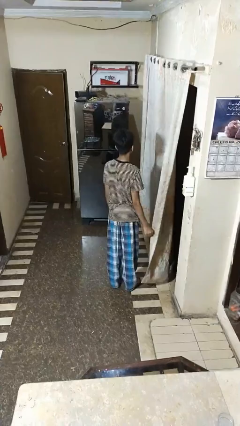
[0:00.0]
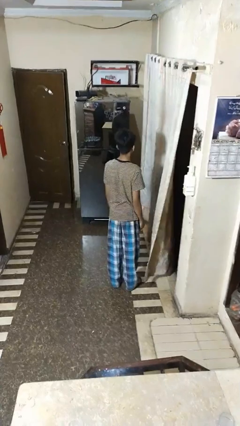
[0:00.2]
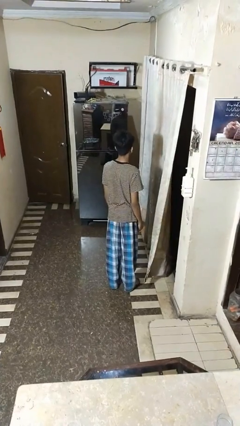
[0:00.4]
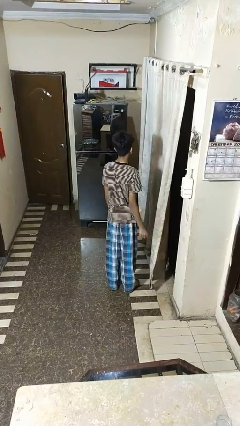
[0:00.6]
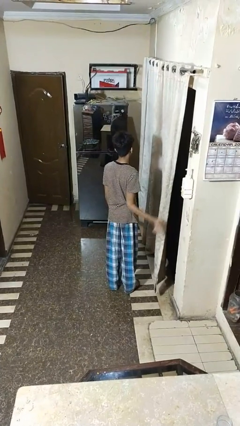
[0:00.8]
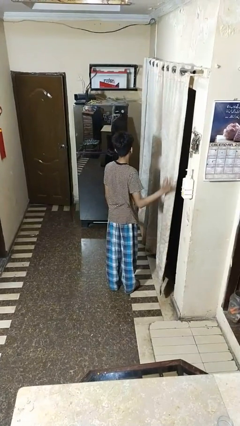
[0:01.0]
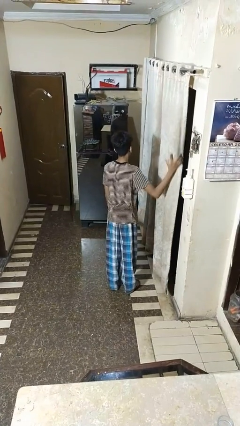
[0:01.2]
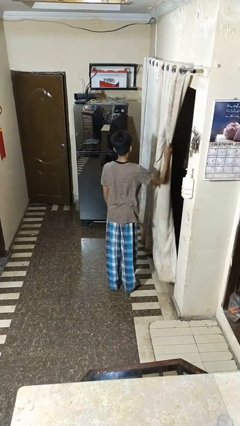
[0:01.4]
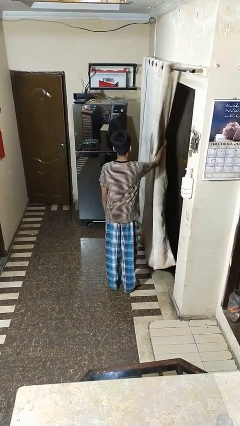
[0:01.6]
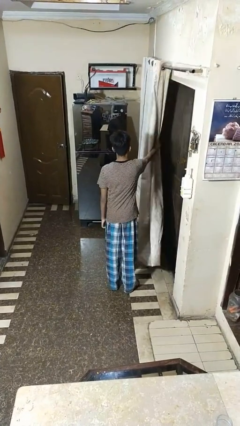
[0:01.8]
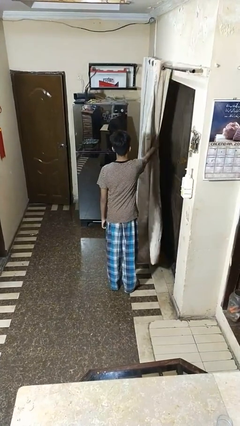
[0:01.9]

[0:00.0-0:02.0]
person opens curtains

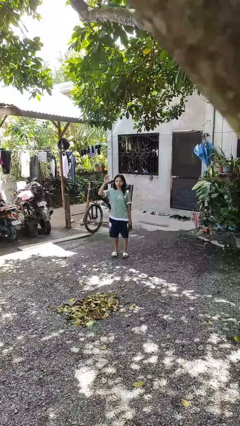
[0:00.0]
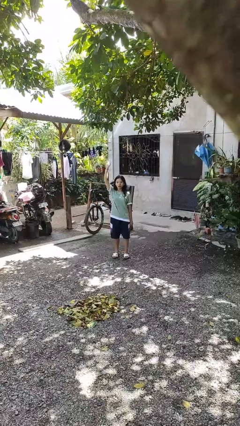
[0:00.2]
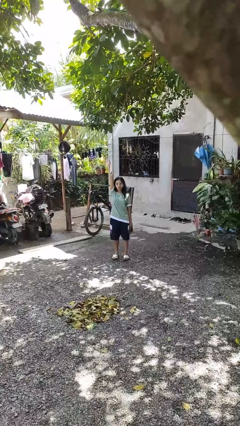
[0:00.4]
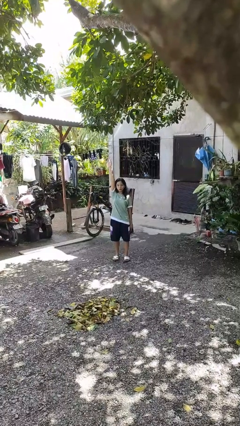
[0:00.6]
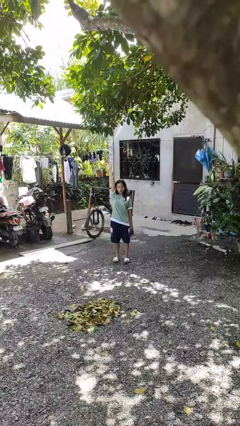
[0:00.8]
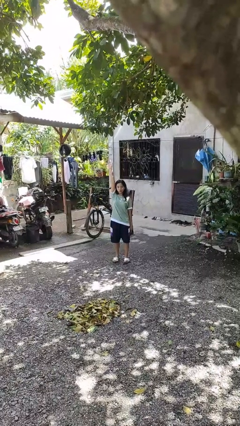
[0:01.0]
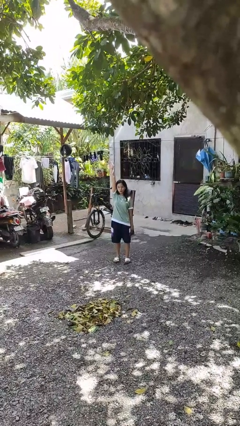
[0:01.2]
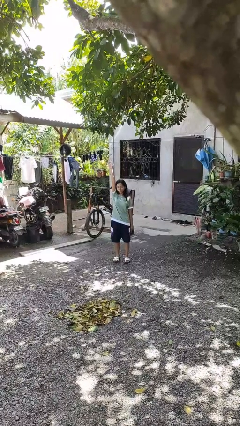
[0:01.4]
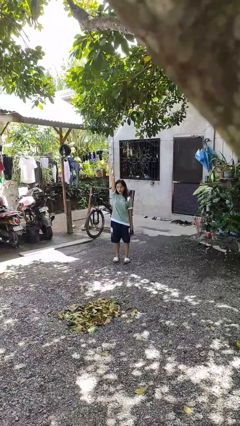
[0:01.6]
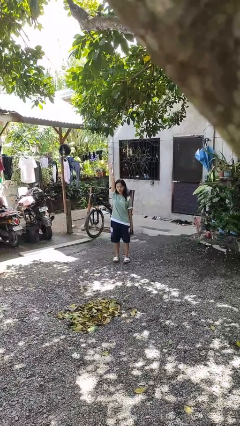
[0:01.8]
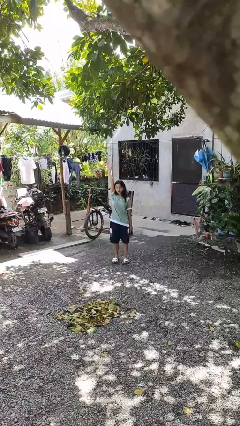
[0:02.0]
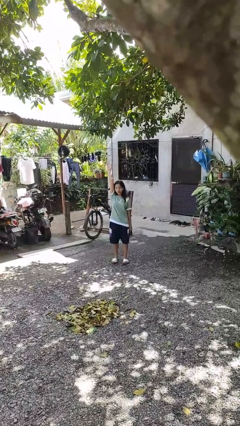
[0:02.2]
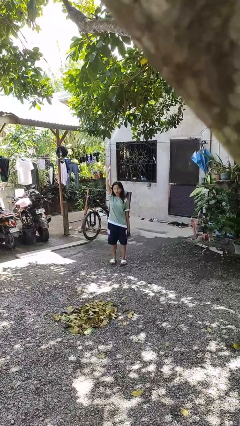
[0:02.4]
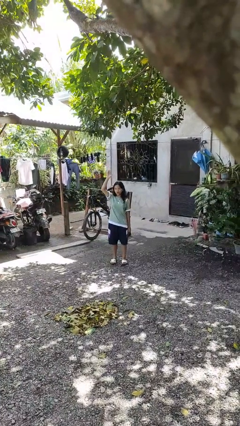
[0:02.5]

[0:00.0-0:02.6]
person gestures raise hand

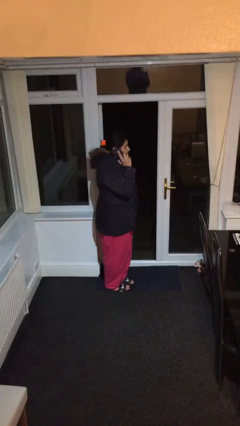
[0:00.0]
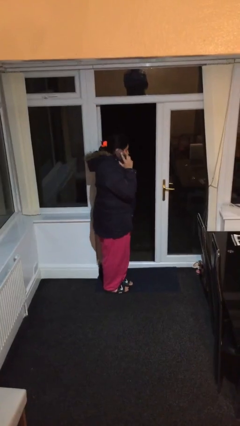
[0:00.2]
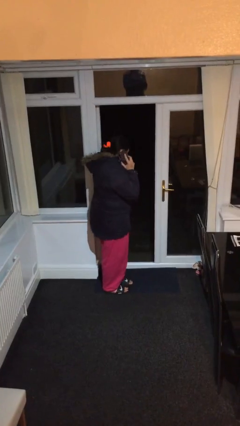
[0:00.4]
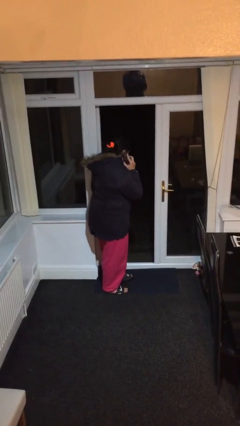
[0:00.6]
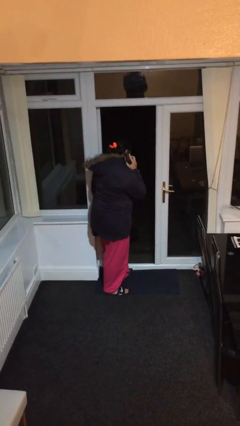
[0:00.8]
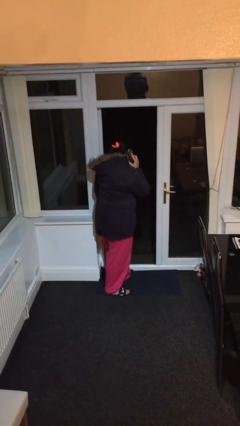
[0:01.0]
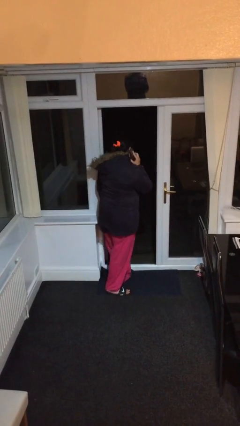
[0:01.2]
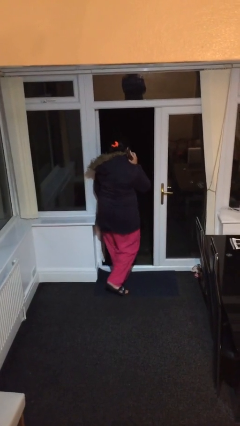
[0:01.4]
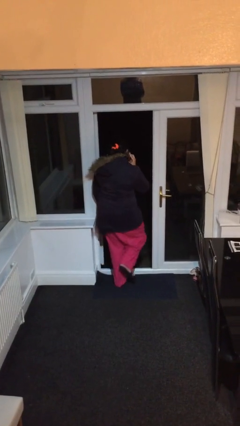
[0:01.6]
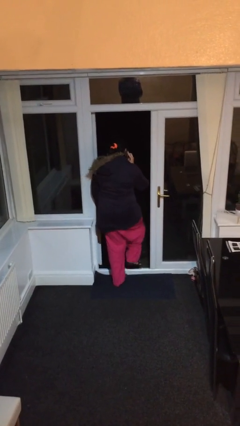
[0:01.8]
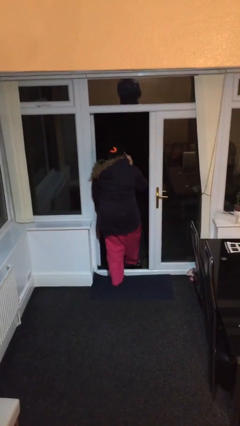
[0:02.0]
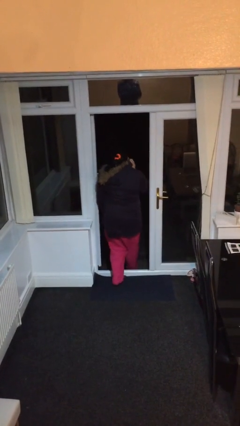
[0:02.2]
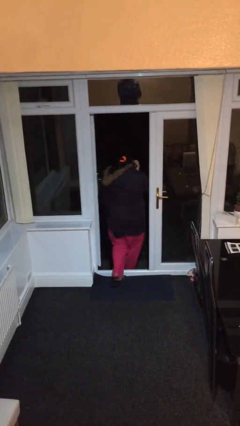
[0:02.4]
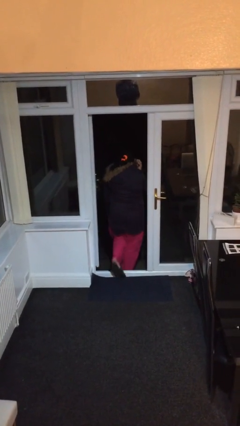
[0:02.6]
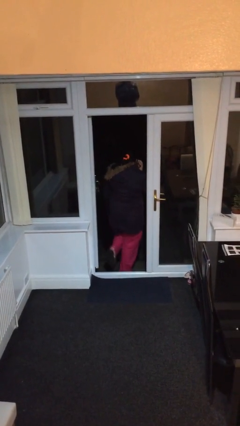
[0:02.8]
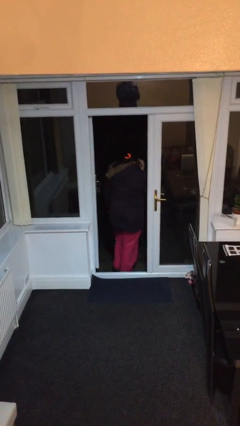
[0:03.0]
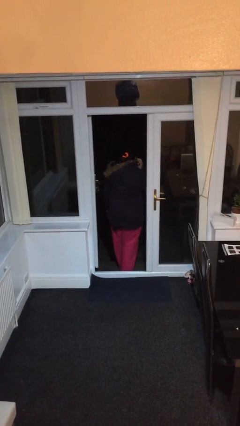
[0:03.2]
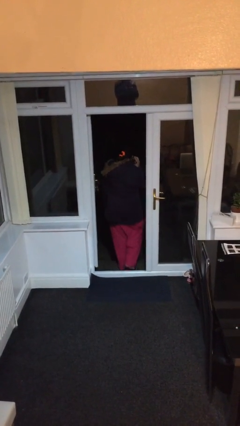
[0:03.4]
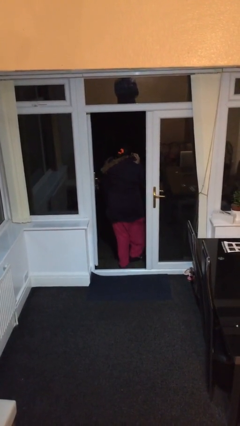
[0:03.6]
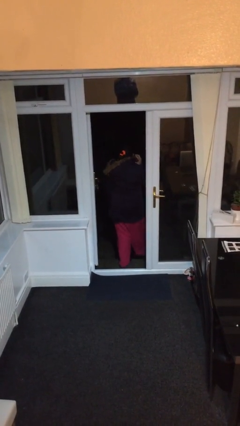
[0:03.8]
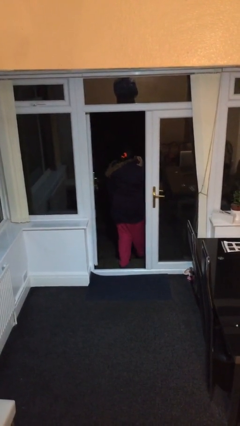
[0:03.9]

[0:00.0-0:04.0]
person exits scene through structure

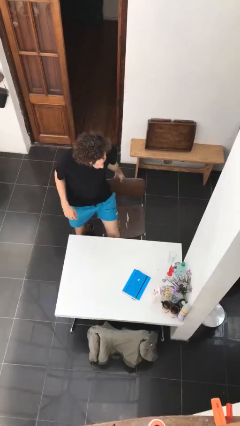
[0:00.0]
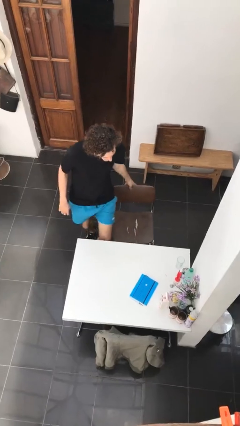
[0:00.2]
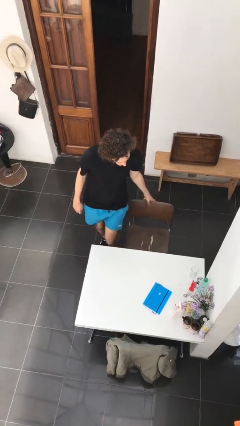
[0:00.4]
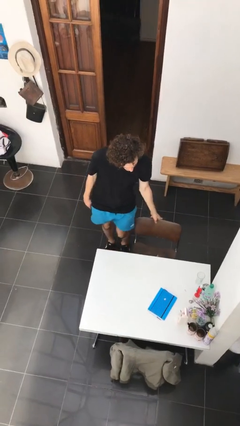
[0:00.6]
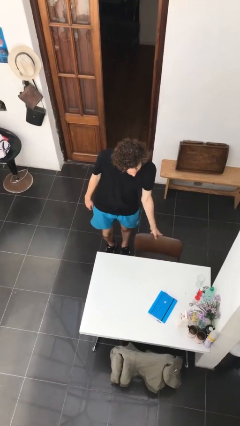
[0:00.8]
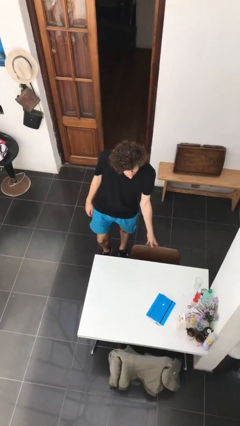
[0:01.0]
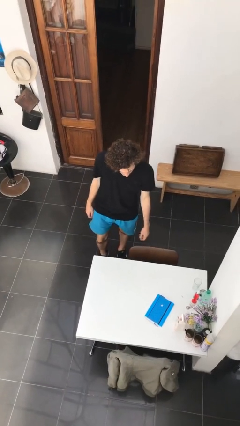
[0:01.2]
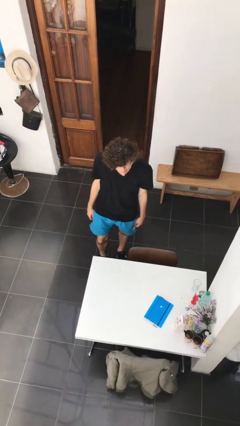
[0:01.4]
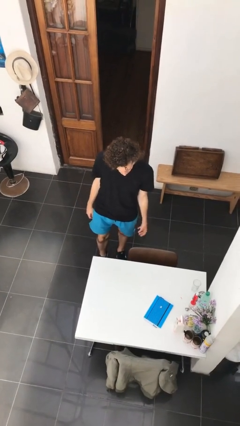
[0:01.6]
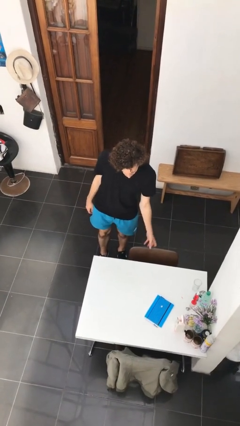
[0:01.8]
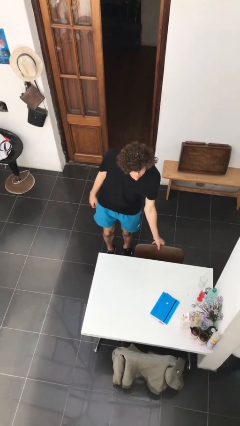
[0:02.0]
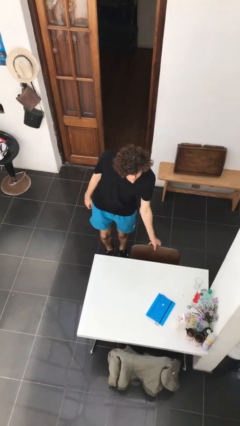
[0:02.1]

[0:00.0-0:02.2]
person stands up

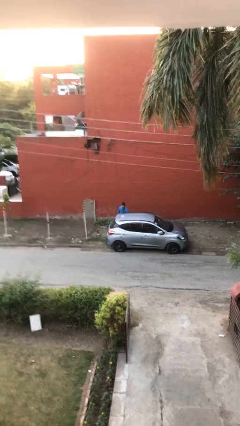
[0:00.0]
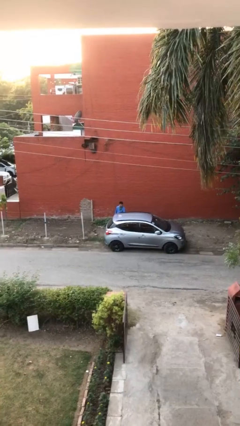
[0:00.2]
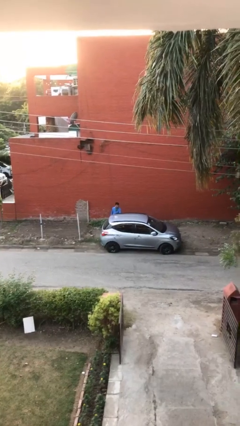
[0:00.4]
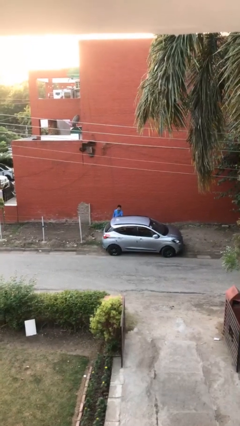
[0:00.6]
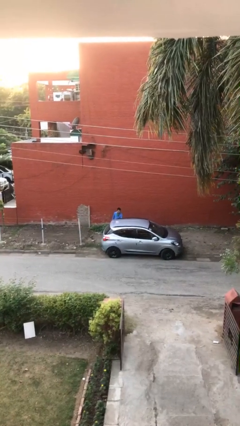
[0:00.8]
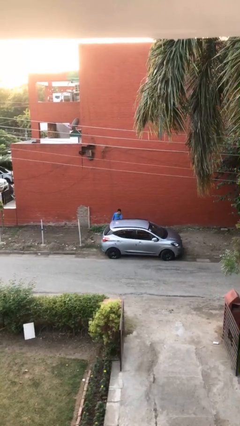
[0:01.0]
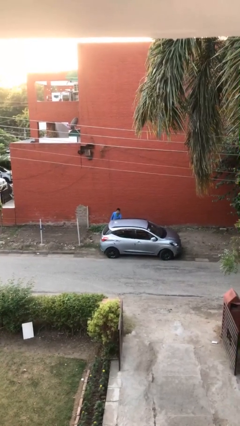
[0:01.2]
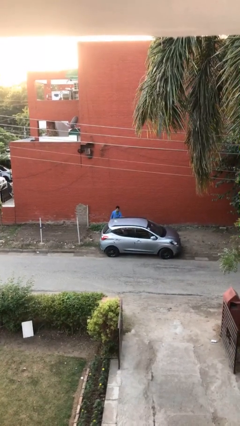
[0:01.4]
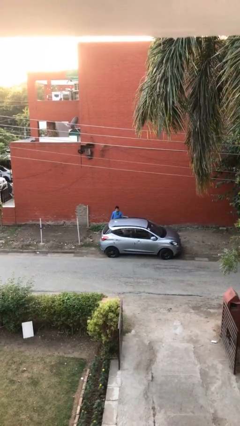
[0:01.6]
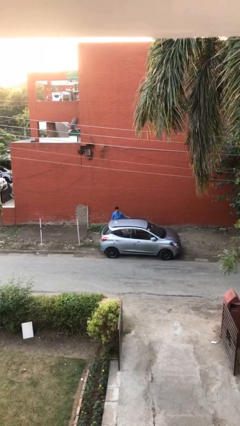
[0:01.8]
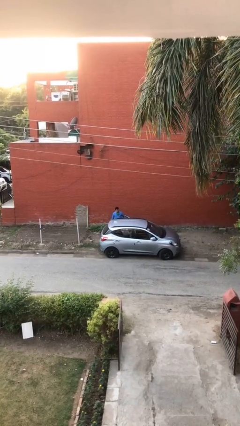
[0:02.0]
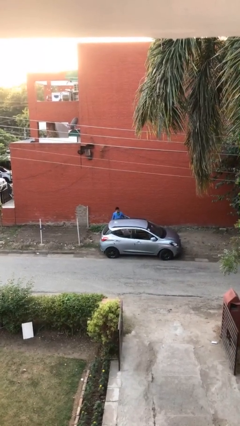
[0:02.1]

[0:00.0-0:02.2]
person opens car door

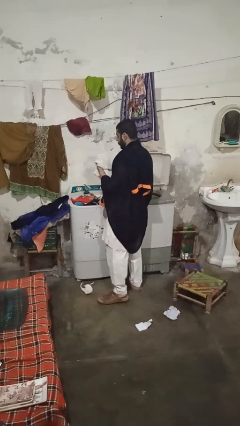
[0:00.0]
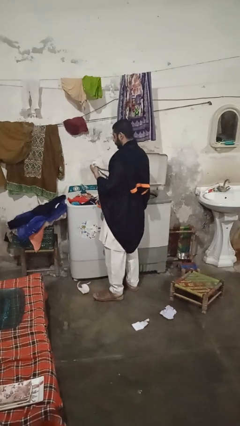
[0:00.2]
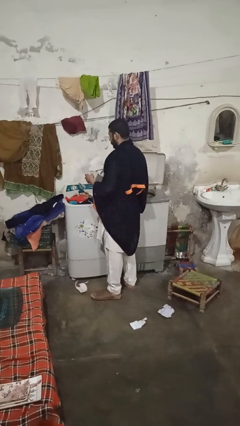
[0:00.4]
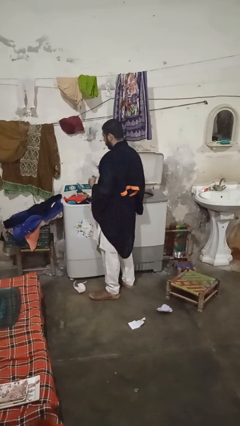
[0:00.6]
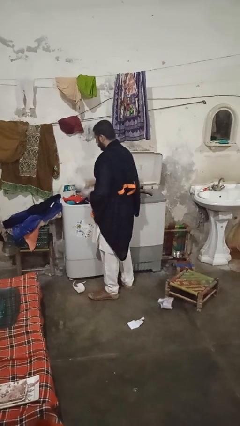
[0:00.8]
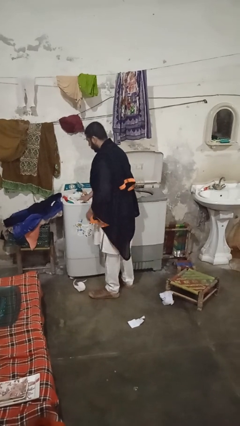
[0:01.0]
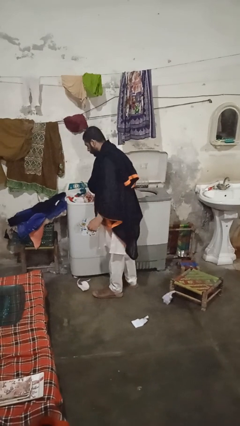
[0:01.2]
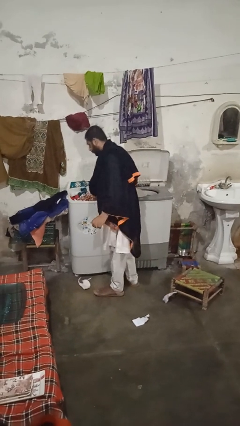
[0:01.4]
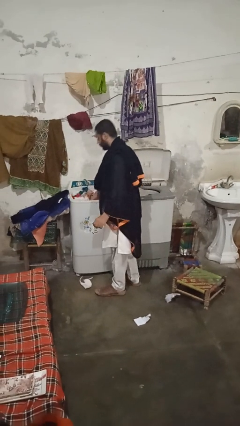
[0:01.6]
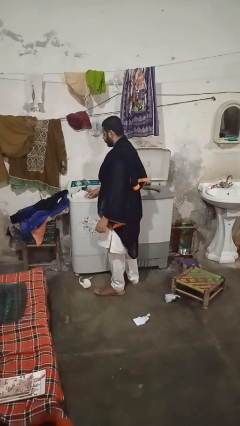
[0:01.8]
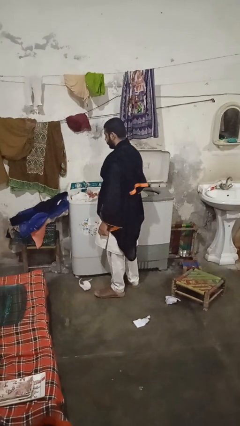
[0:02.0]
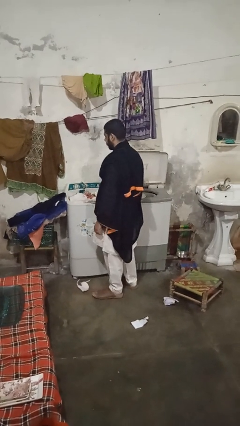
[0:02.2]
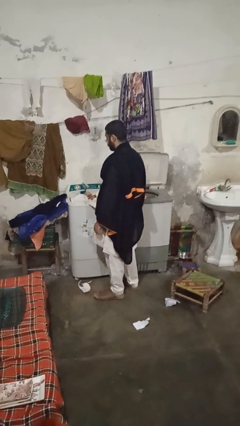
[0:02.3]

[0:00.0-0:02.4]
person loads clotheswasher

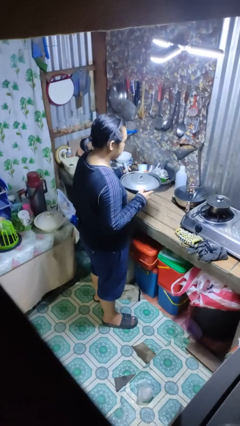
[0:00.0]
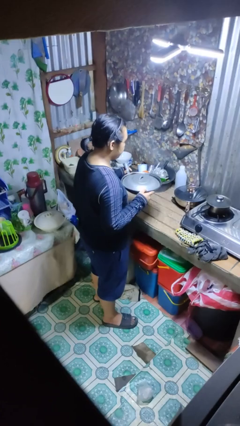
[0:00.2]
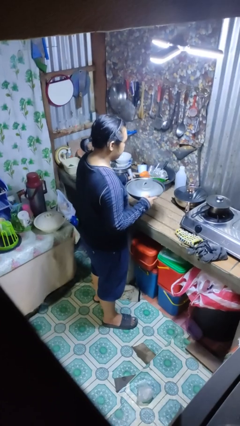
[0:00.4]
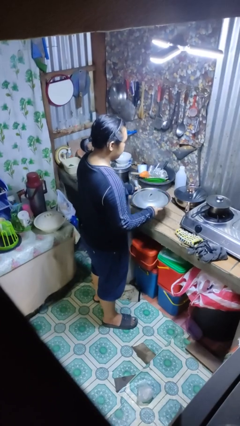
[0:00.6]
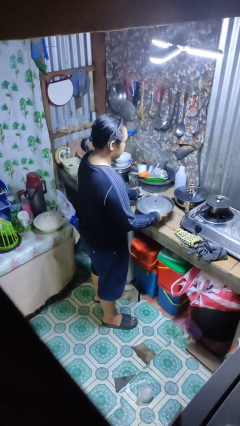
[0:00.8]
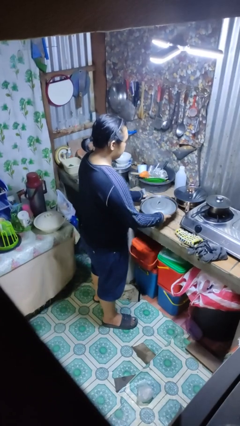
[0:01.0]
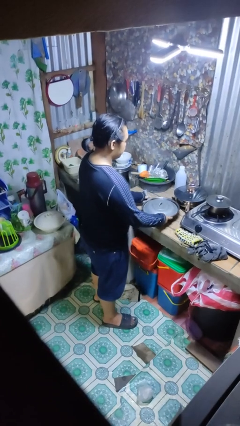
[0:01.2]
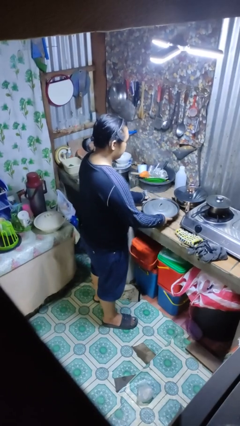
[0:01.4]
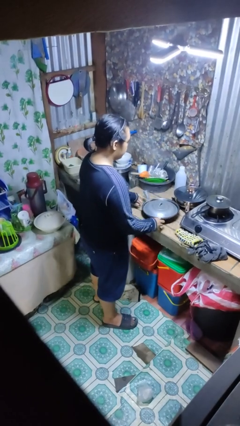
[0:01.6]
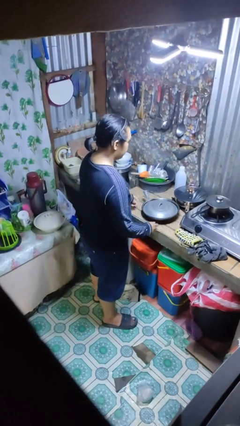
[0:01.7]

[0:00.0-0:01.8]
person puts down object on countertop
